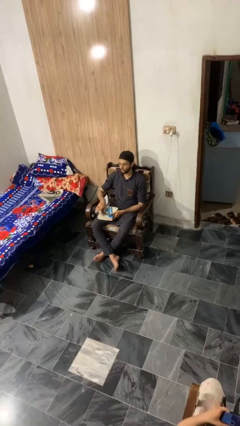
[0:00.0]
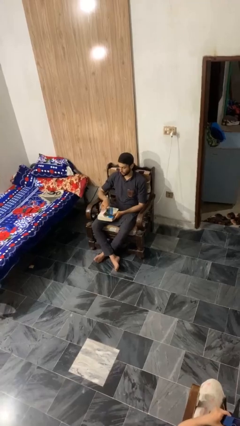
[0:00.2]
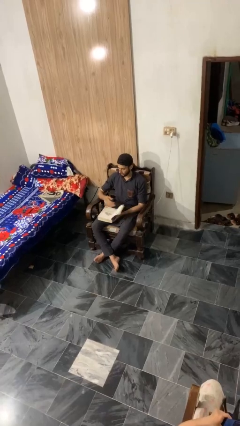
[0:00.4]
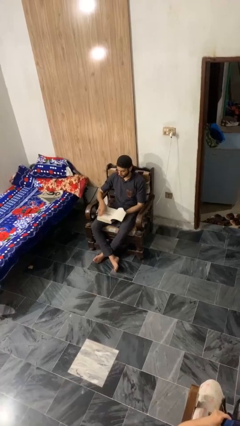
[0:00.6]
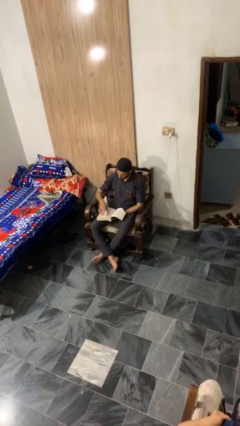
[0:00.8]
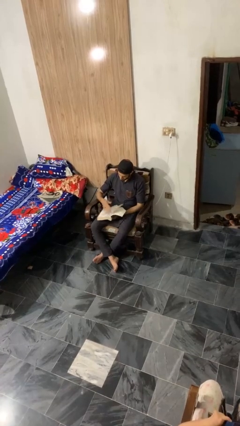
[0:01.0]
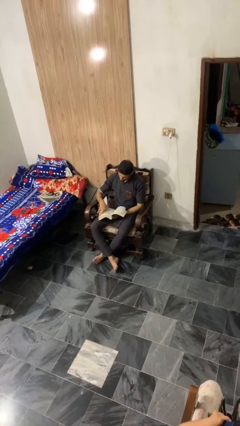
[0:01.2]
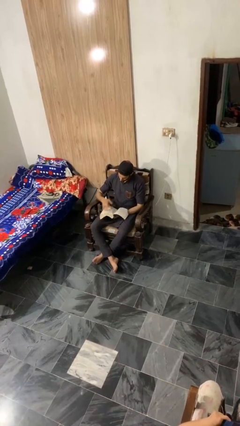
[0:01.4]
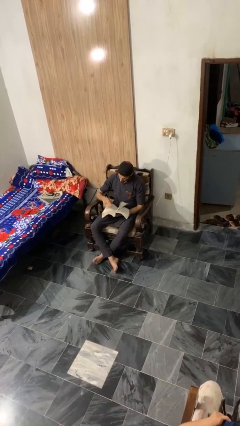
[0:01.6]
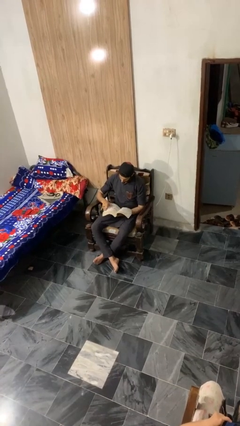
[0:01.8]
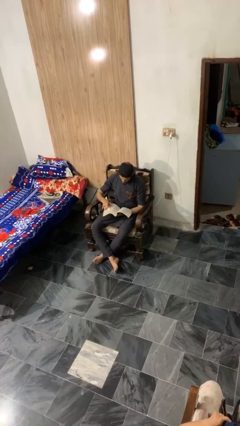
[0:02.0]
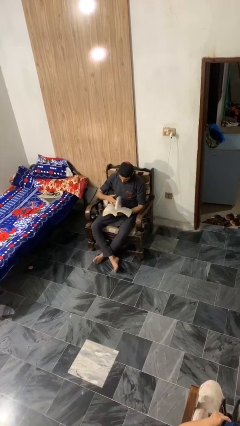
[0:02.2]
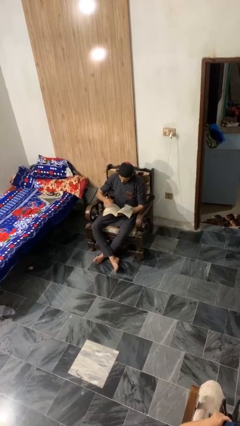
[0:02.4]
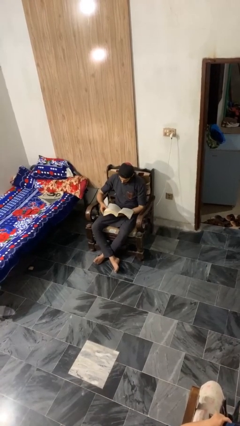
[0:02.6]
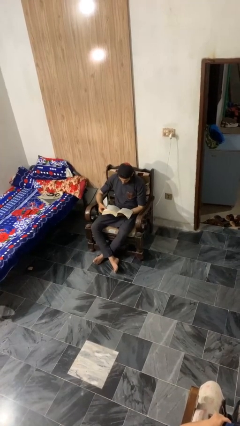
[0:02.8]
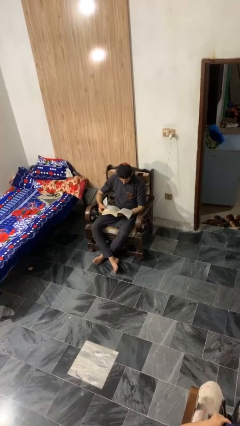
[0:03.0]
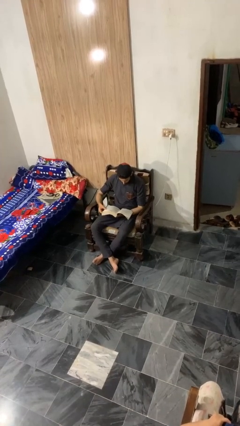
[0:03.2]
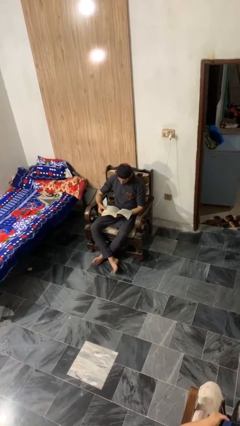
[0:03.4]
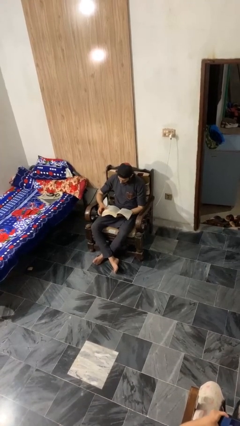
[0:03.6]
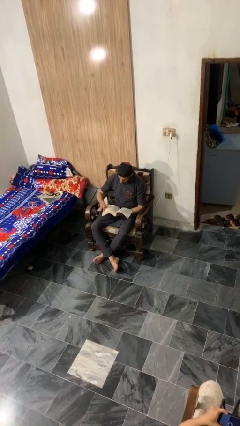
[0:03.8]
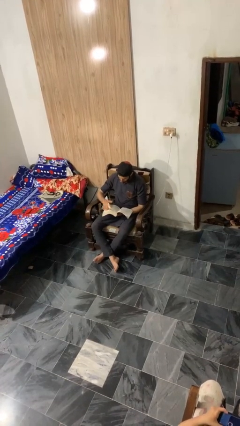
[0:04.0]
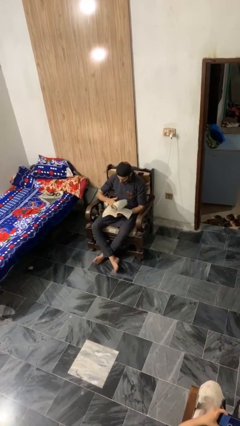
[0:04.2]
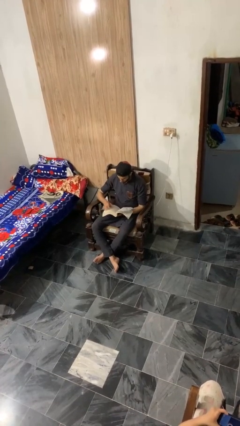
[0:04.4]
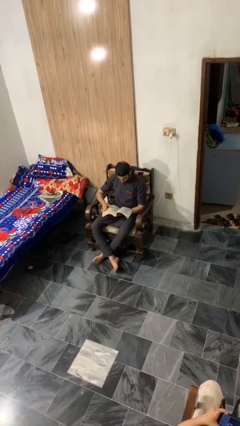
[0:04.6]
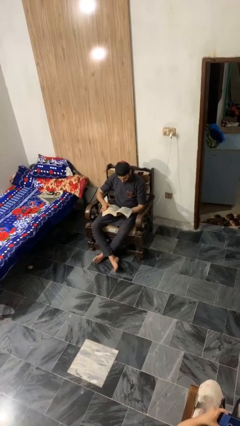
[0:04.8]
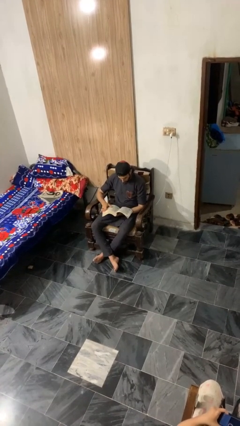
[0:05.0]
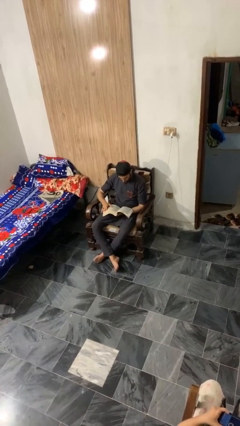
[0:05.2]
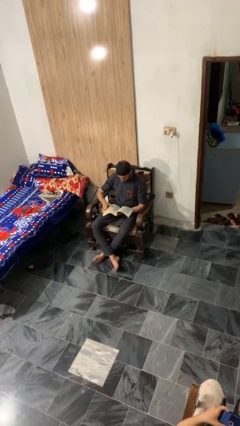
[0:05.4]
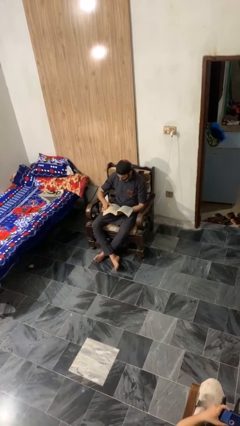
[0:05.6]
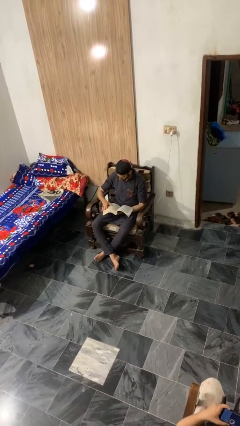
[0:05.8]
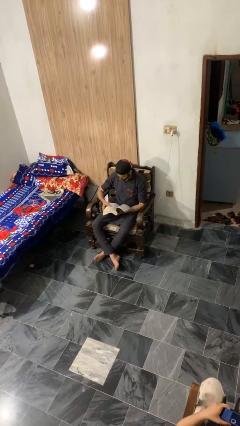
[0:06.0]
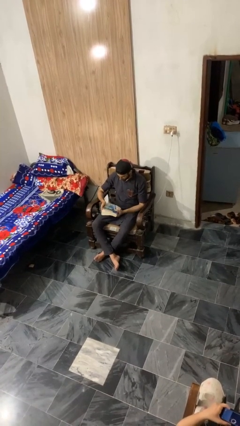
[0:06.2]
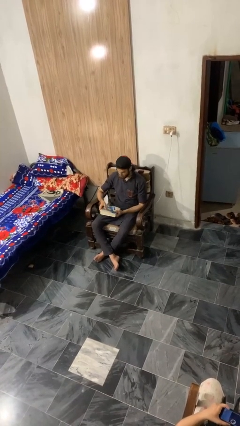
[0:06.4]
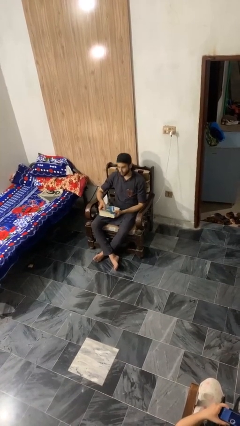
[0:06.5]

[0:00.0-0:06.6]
person reads book

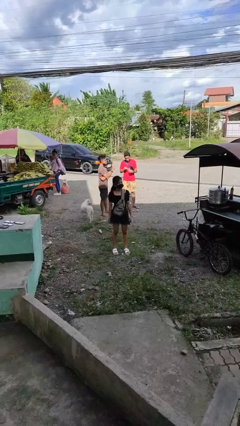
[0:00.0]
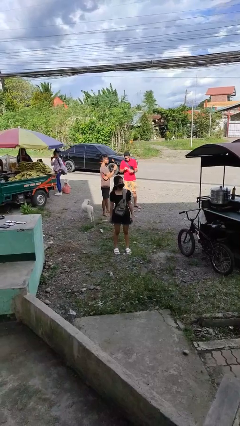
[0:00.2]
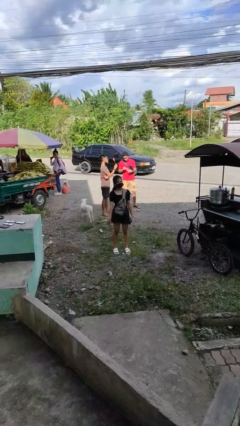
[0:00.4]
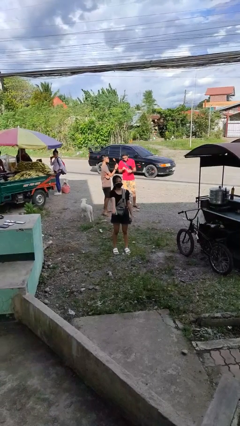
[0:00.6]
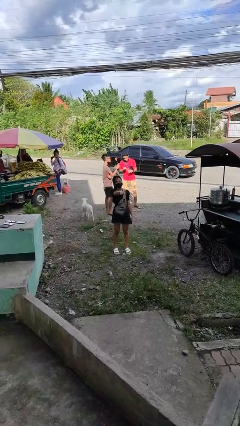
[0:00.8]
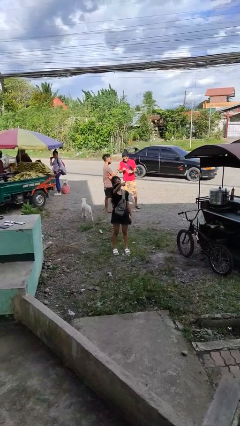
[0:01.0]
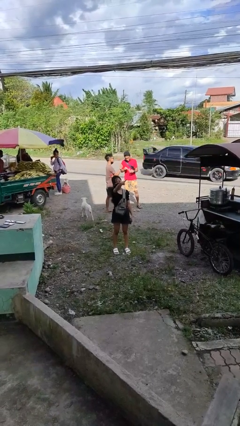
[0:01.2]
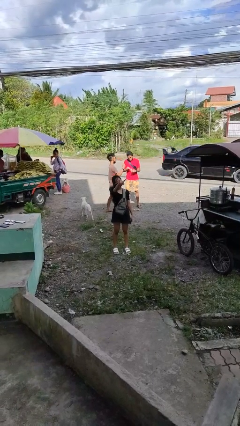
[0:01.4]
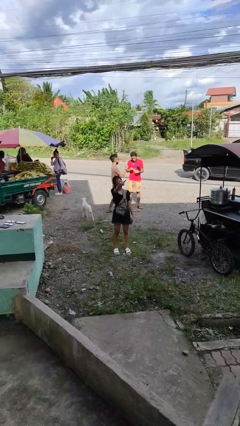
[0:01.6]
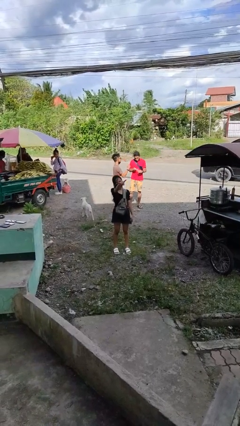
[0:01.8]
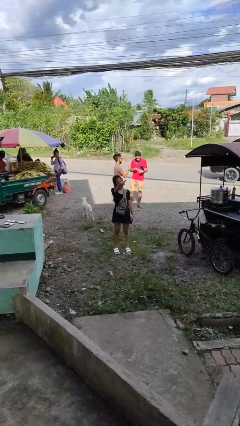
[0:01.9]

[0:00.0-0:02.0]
person points at person

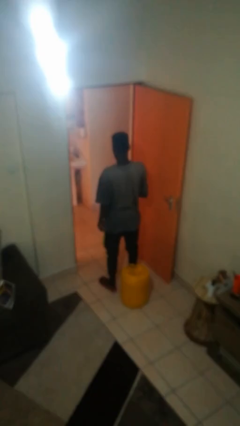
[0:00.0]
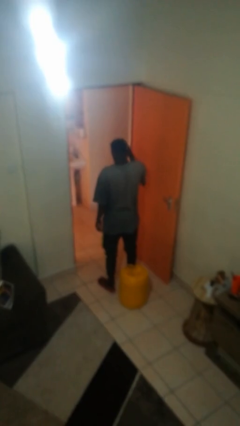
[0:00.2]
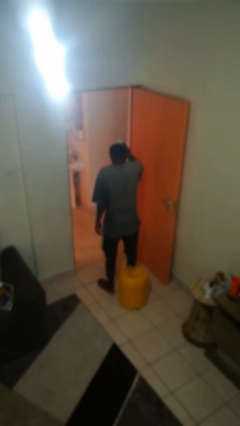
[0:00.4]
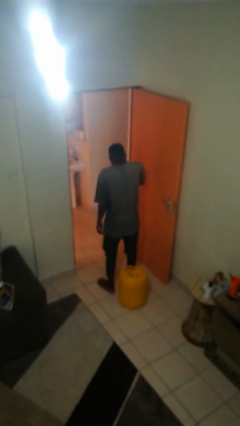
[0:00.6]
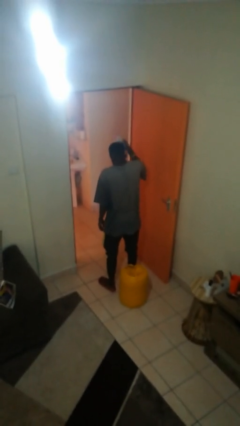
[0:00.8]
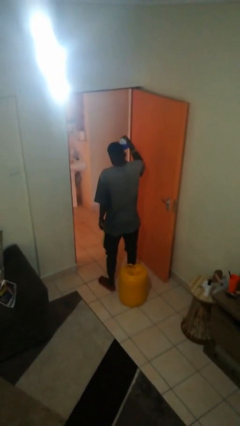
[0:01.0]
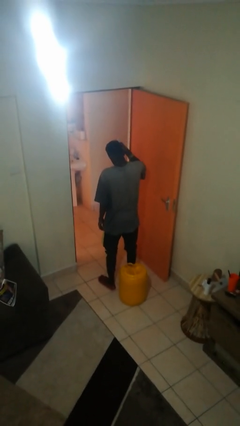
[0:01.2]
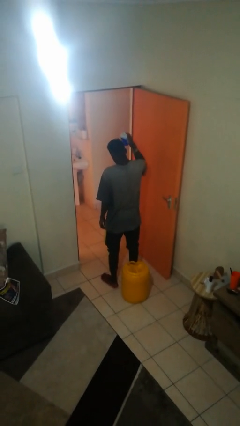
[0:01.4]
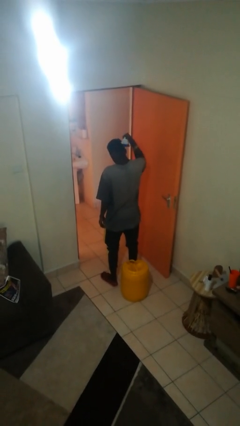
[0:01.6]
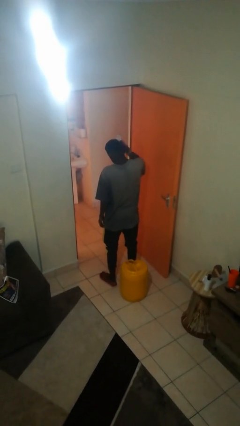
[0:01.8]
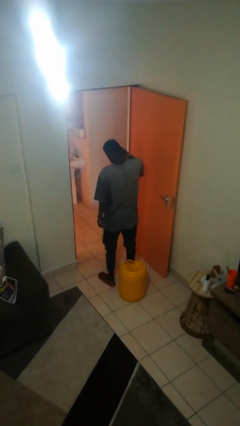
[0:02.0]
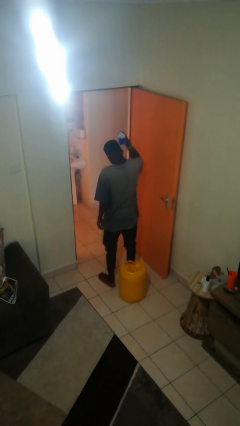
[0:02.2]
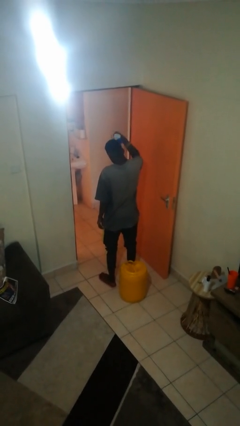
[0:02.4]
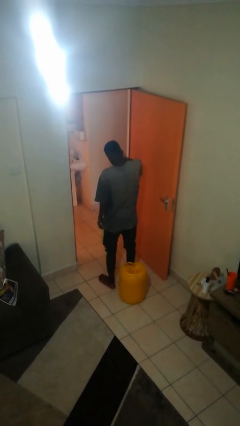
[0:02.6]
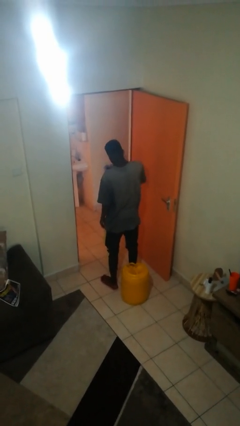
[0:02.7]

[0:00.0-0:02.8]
person brushes hair

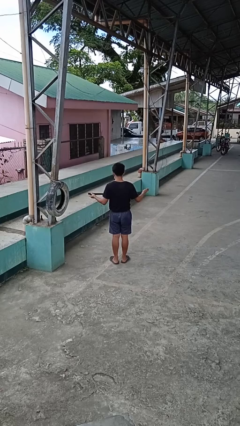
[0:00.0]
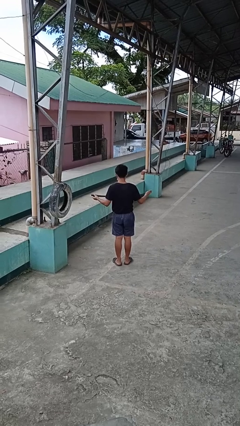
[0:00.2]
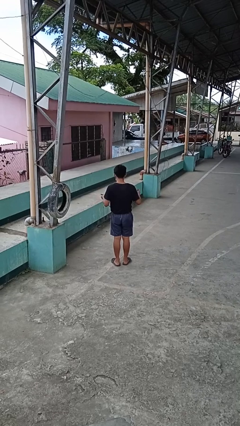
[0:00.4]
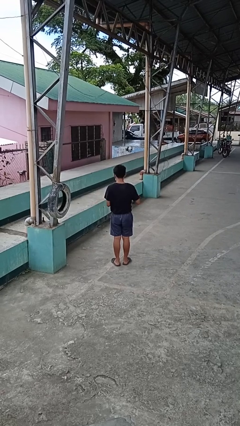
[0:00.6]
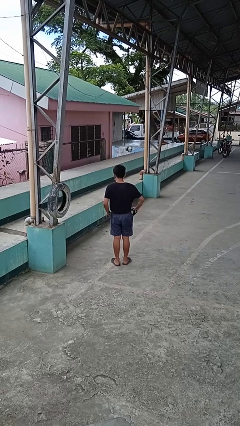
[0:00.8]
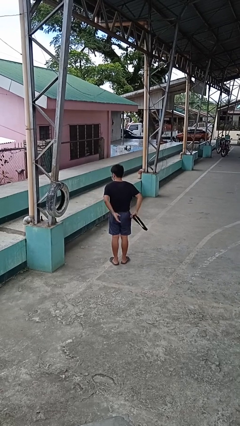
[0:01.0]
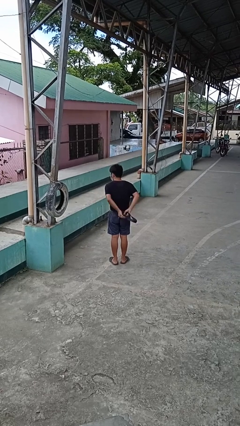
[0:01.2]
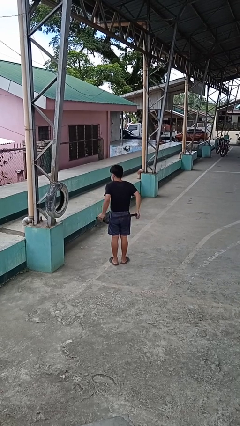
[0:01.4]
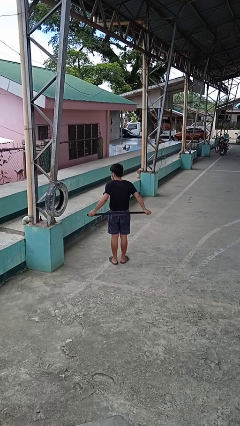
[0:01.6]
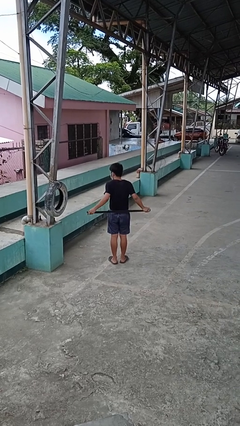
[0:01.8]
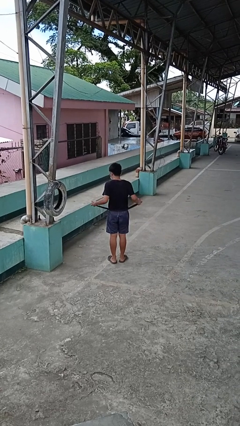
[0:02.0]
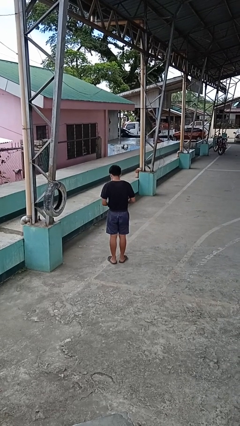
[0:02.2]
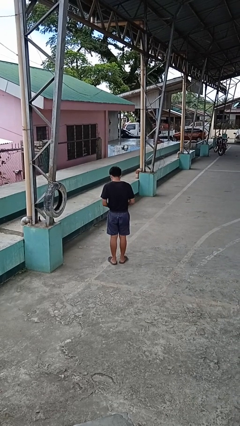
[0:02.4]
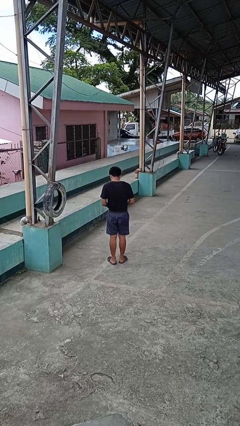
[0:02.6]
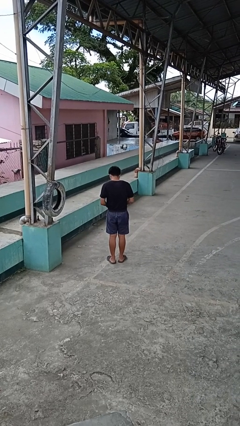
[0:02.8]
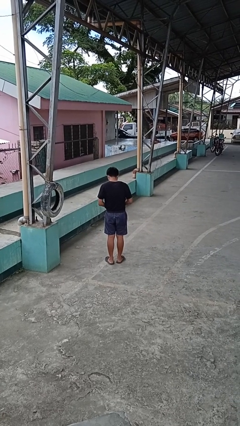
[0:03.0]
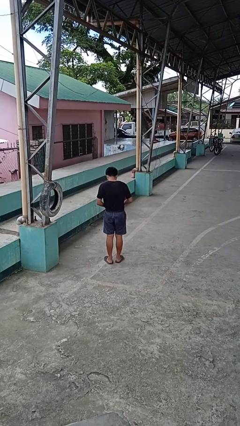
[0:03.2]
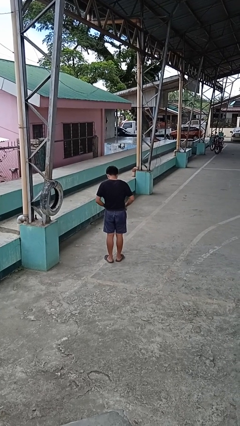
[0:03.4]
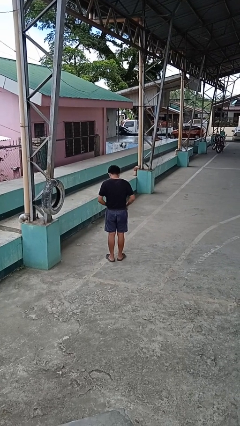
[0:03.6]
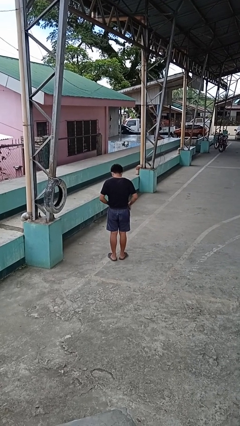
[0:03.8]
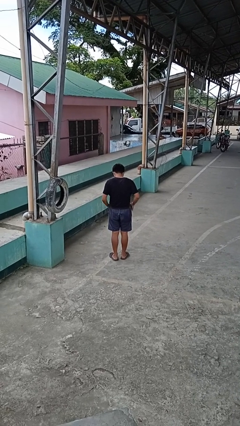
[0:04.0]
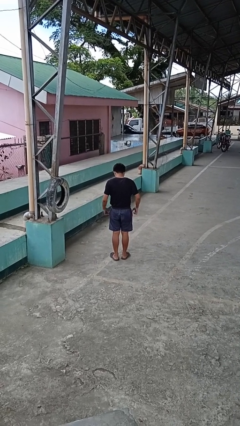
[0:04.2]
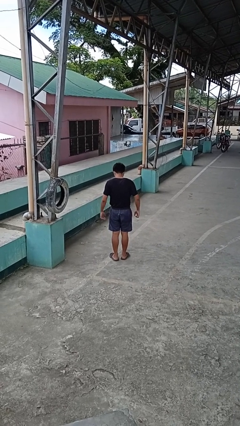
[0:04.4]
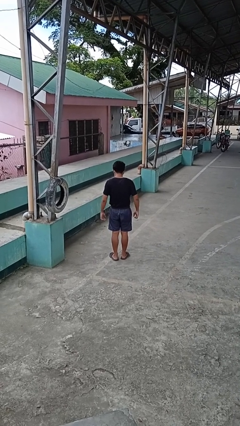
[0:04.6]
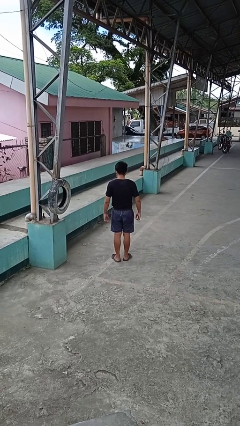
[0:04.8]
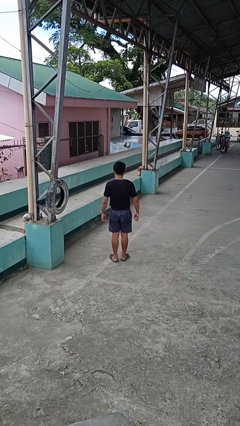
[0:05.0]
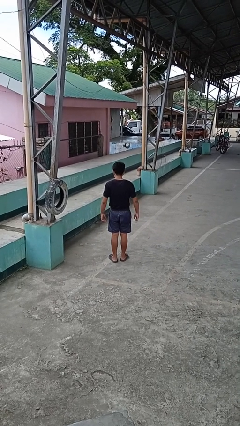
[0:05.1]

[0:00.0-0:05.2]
person puts on belt

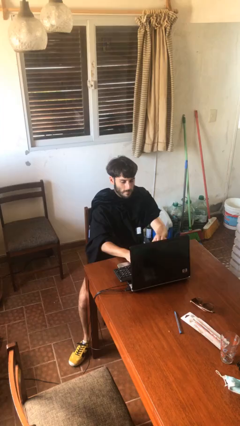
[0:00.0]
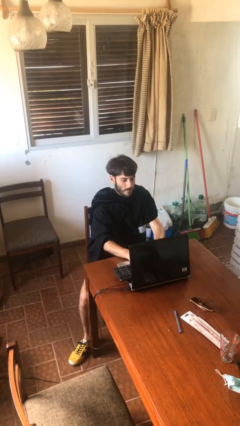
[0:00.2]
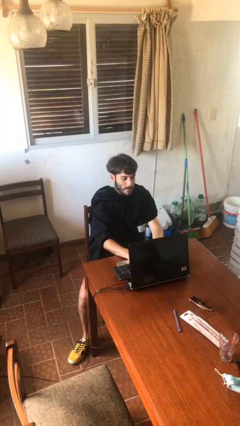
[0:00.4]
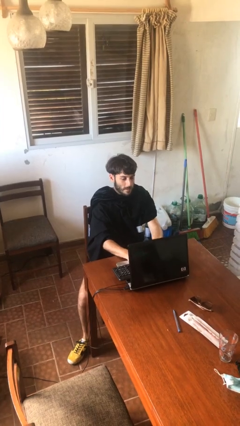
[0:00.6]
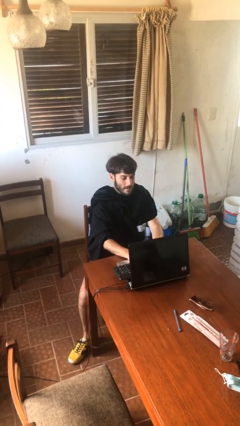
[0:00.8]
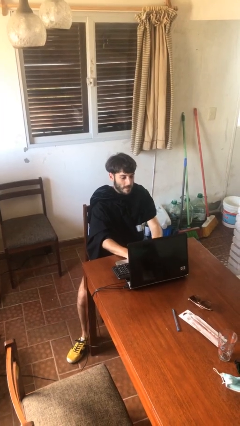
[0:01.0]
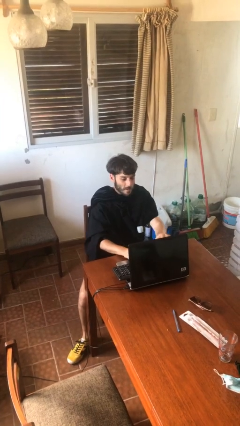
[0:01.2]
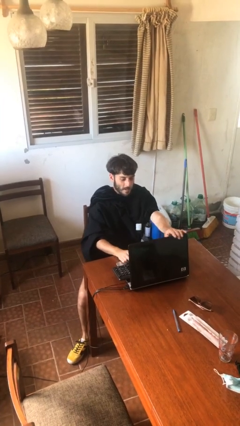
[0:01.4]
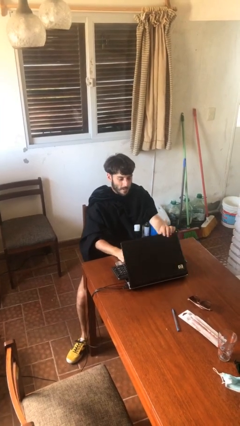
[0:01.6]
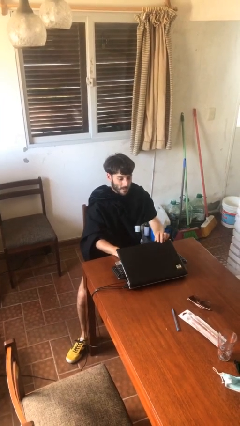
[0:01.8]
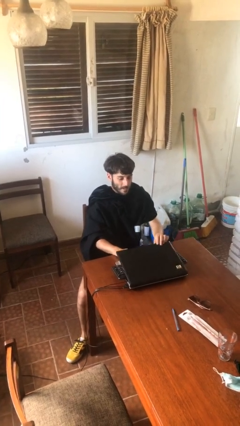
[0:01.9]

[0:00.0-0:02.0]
person interacts with laptop
